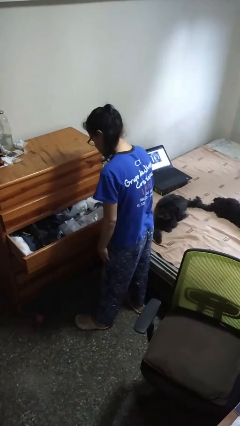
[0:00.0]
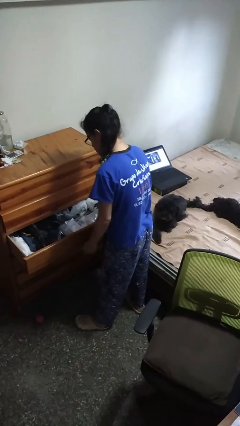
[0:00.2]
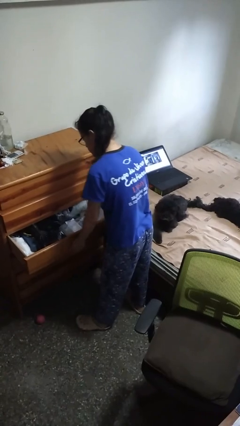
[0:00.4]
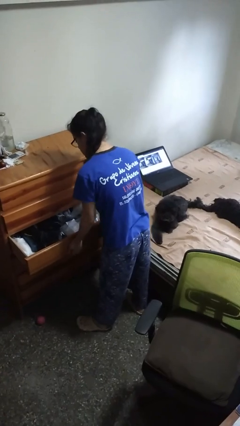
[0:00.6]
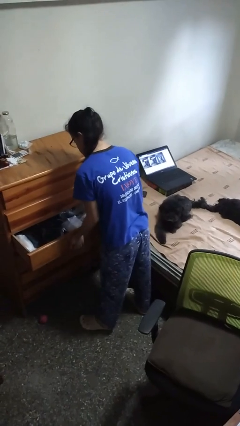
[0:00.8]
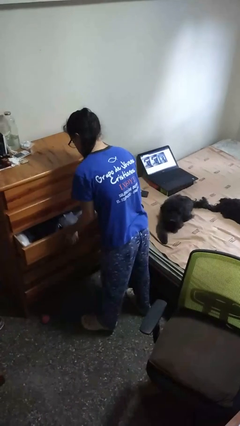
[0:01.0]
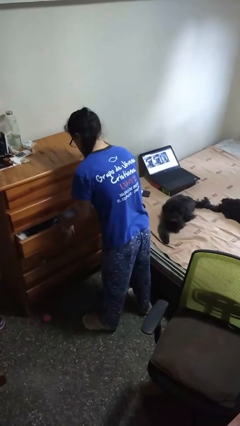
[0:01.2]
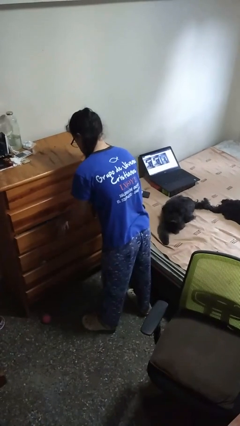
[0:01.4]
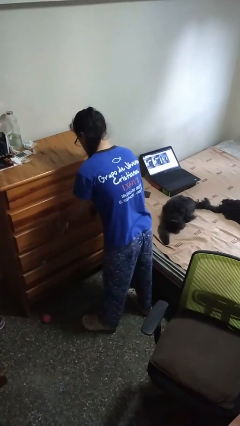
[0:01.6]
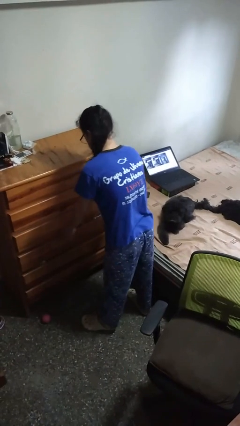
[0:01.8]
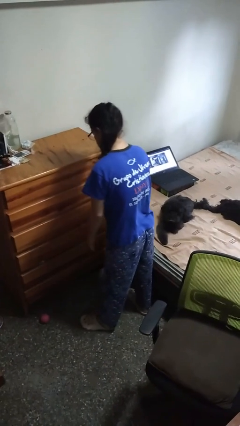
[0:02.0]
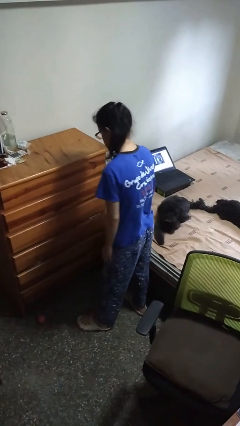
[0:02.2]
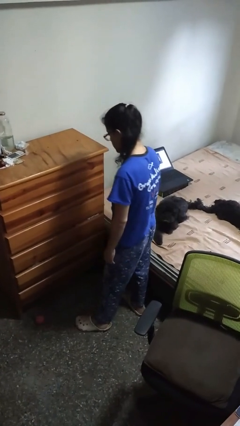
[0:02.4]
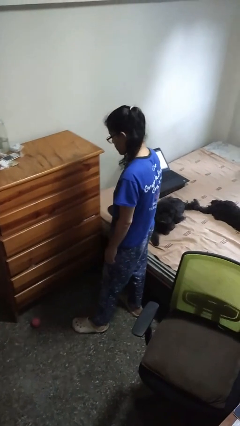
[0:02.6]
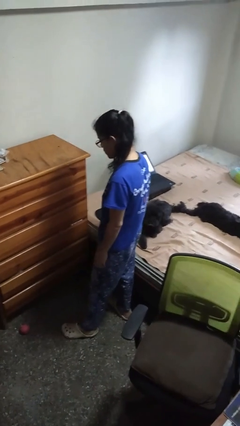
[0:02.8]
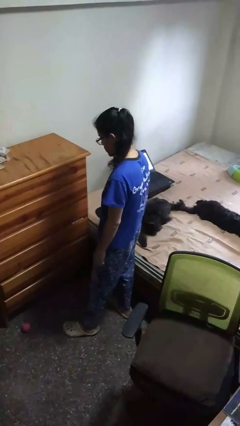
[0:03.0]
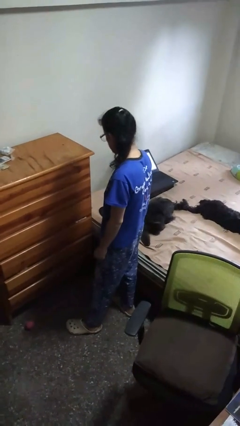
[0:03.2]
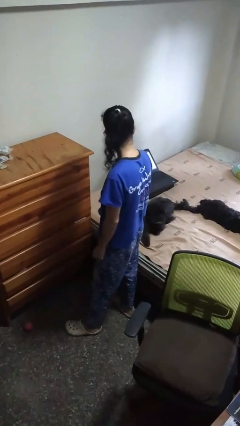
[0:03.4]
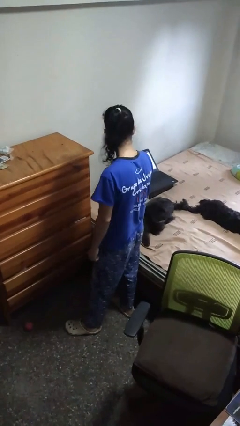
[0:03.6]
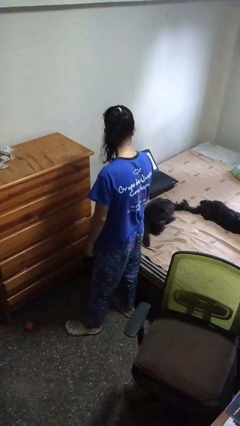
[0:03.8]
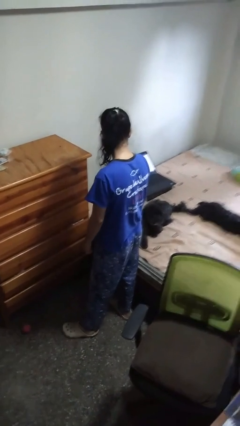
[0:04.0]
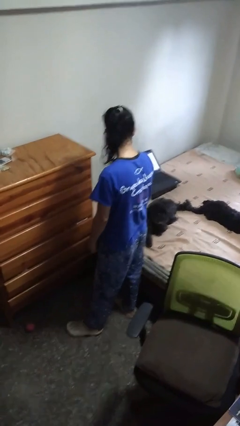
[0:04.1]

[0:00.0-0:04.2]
person closes dresser drawer

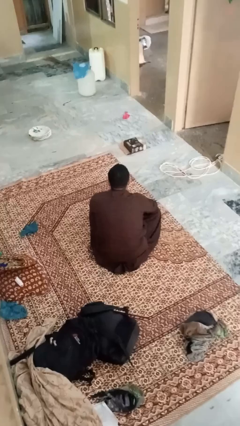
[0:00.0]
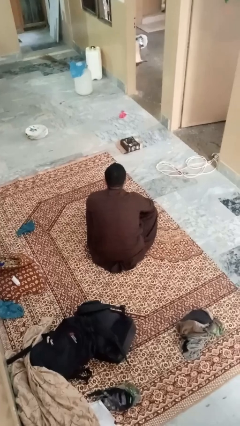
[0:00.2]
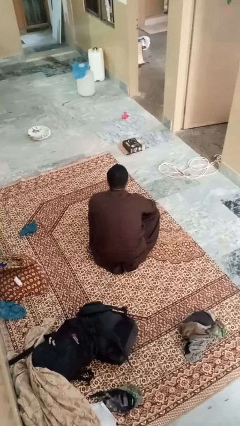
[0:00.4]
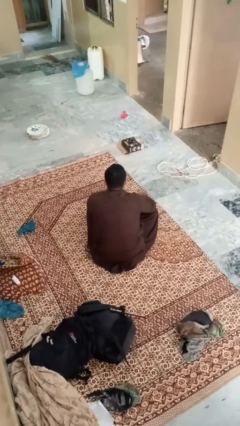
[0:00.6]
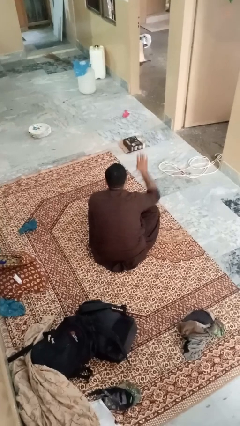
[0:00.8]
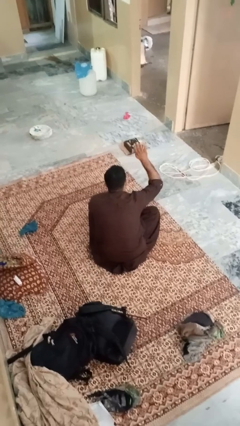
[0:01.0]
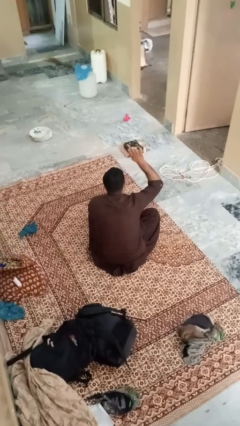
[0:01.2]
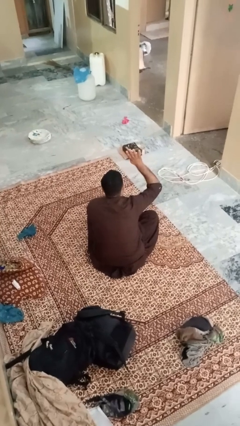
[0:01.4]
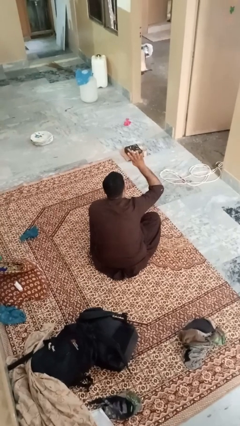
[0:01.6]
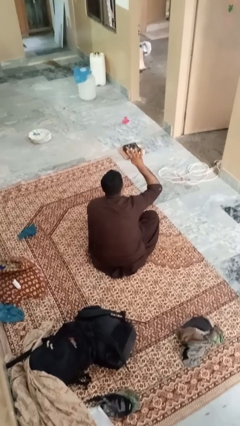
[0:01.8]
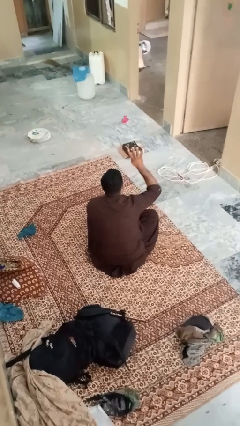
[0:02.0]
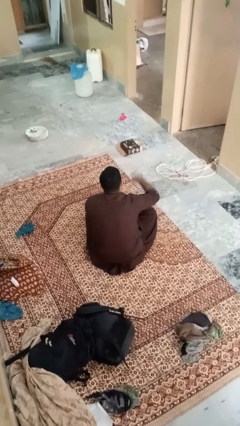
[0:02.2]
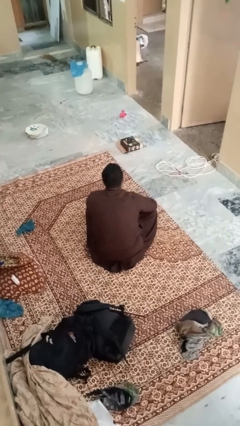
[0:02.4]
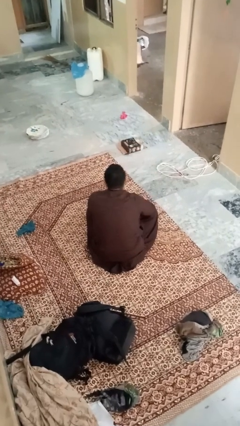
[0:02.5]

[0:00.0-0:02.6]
person gestures number four

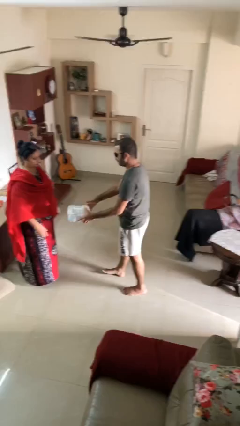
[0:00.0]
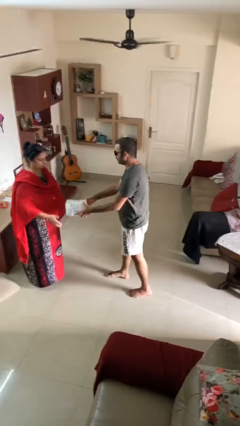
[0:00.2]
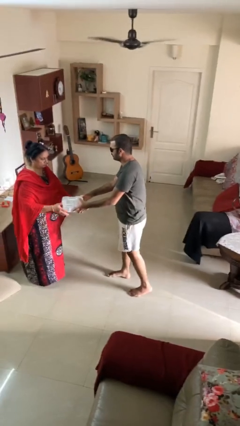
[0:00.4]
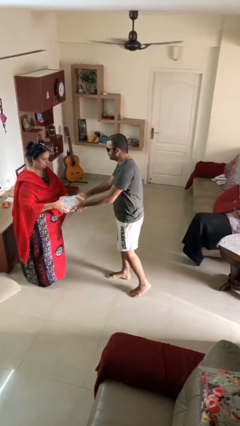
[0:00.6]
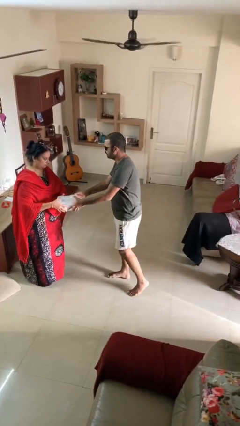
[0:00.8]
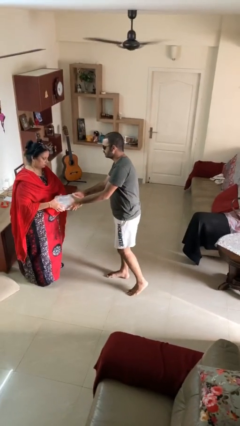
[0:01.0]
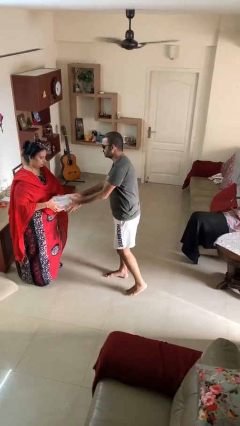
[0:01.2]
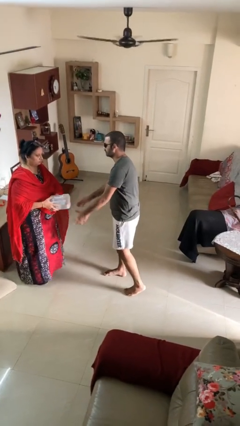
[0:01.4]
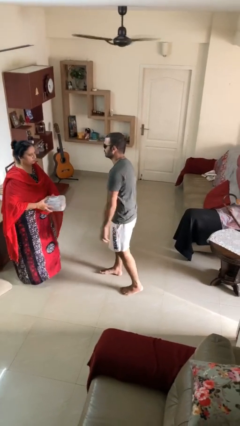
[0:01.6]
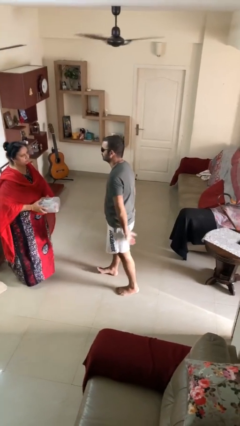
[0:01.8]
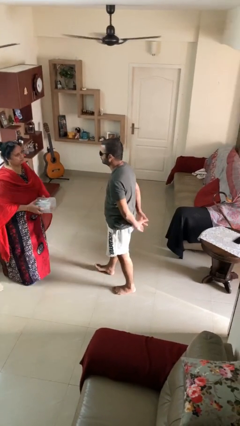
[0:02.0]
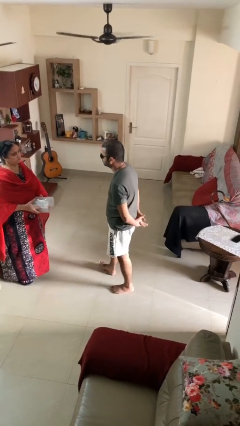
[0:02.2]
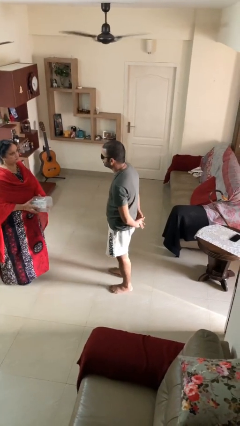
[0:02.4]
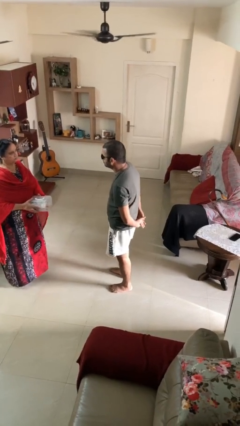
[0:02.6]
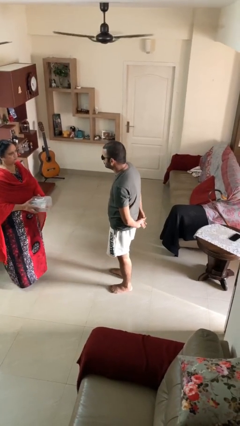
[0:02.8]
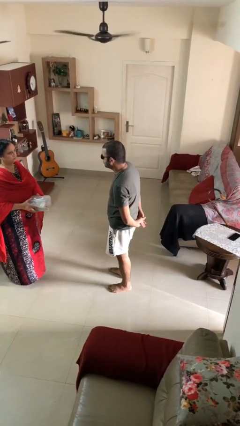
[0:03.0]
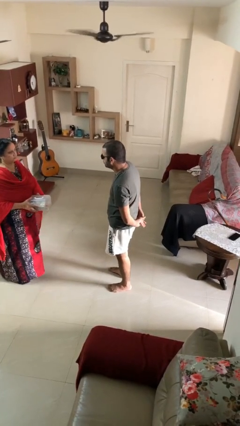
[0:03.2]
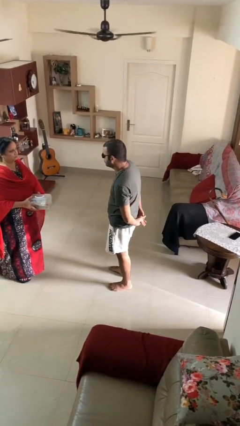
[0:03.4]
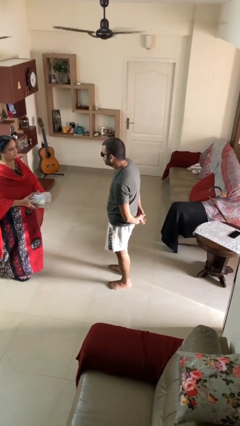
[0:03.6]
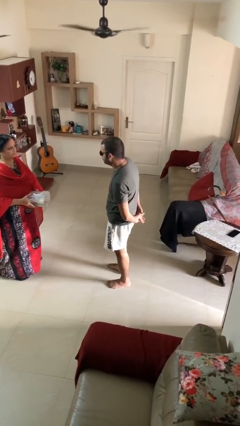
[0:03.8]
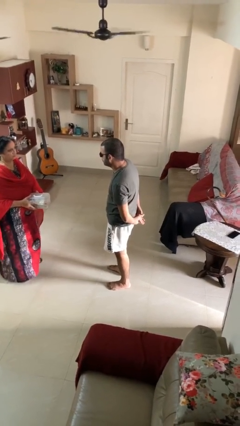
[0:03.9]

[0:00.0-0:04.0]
person transfers object to person

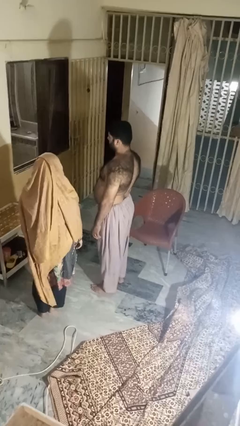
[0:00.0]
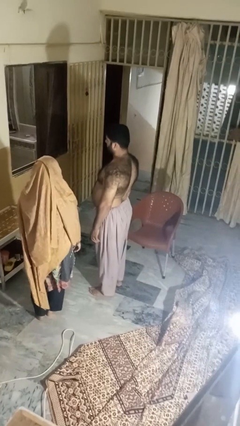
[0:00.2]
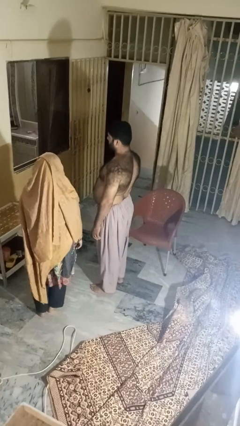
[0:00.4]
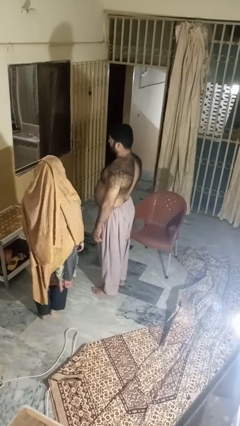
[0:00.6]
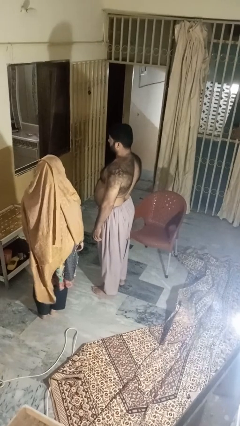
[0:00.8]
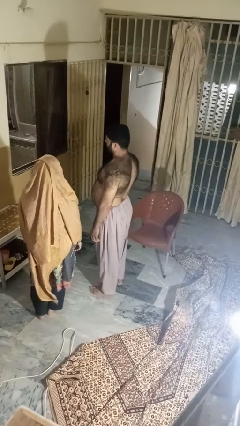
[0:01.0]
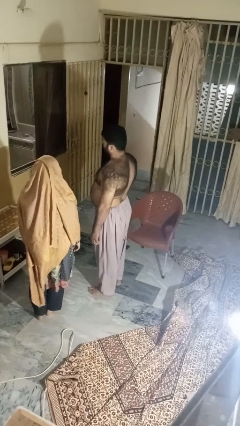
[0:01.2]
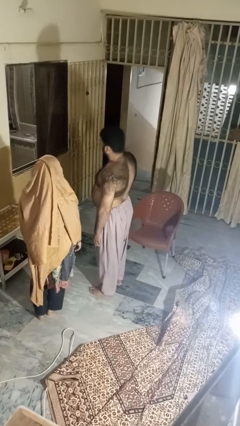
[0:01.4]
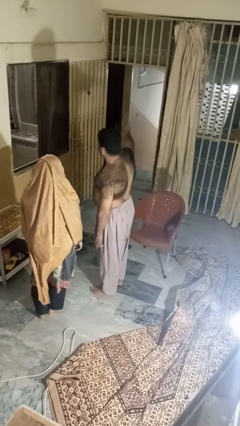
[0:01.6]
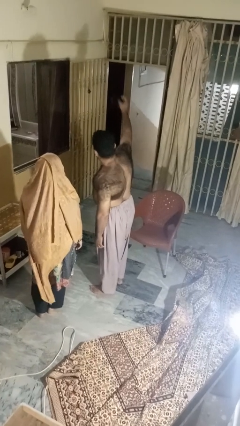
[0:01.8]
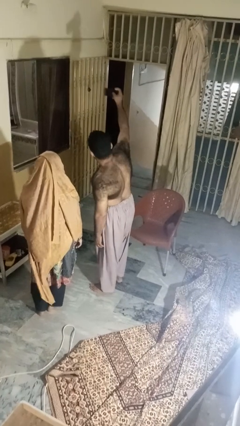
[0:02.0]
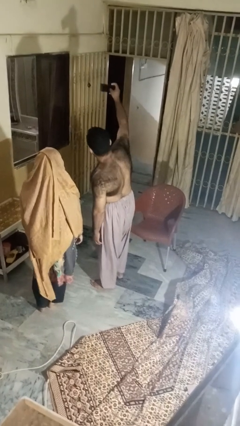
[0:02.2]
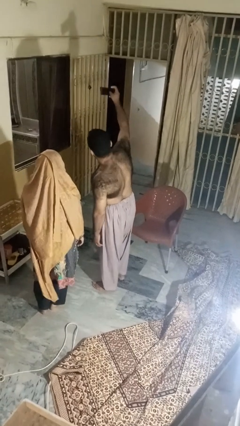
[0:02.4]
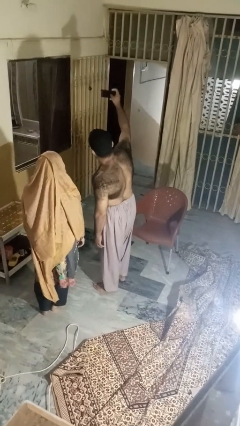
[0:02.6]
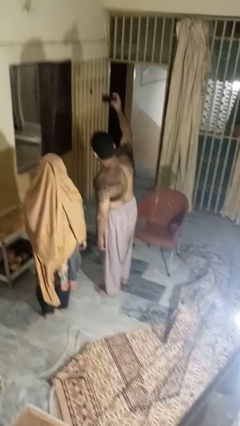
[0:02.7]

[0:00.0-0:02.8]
person takes selfie with person

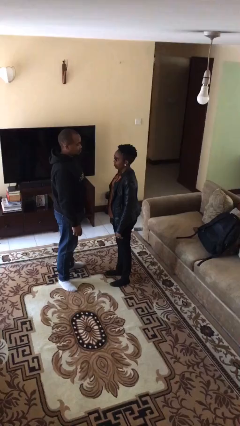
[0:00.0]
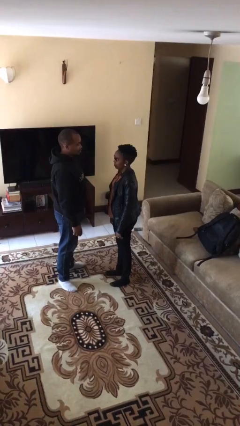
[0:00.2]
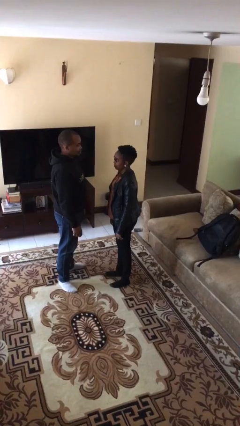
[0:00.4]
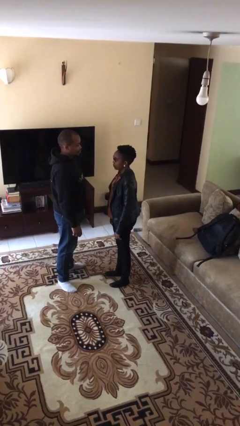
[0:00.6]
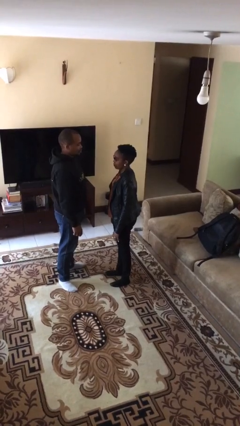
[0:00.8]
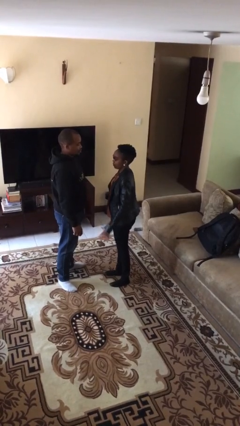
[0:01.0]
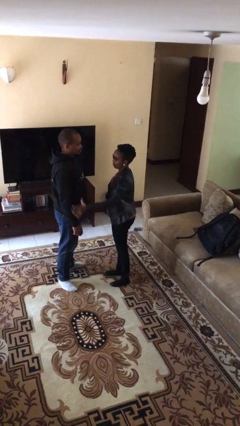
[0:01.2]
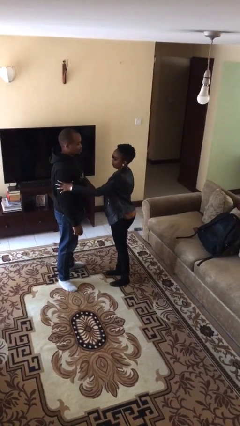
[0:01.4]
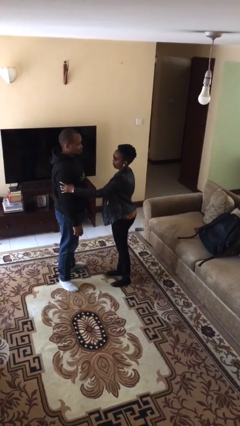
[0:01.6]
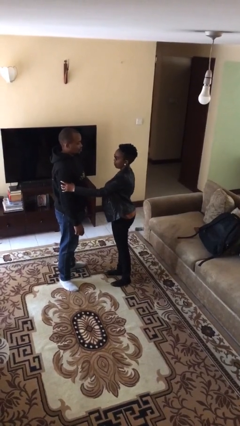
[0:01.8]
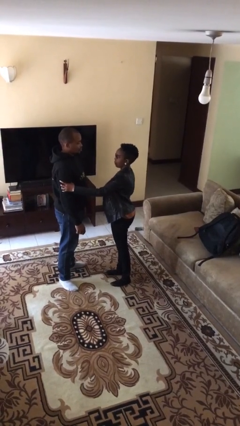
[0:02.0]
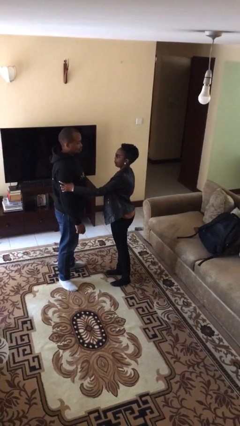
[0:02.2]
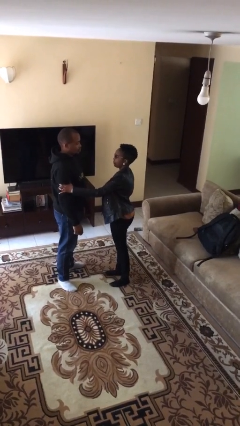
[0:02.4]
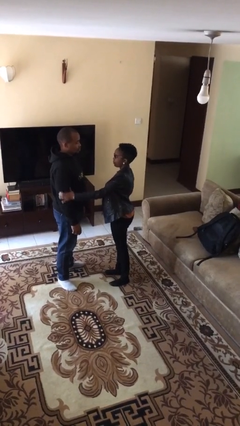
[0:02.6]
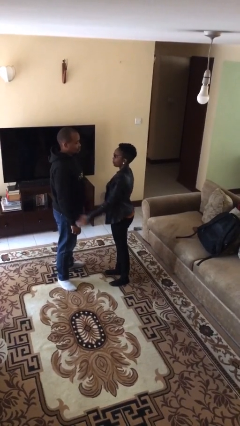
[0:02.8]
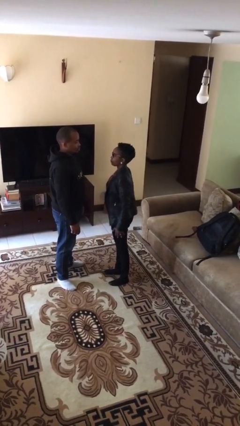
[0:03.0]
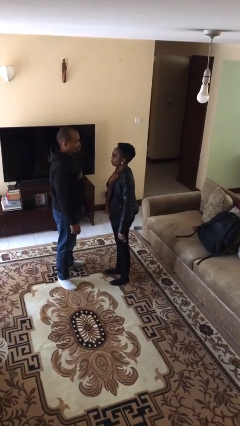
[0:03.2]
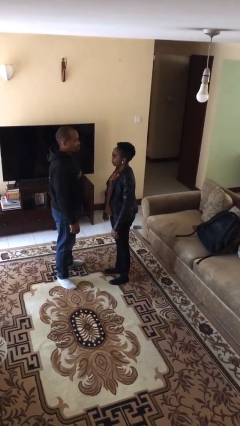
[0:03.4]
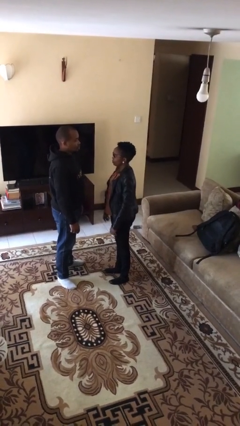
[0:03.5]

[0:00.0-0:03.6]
person grabs person by bicep

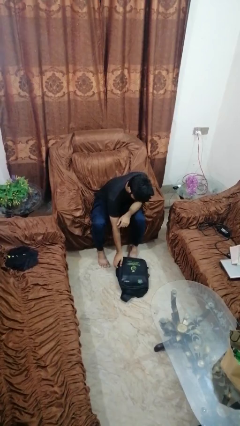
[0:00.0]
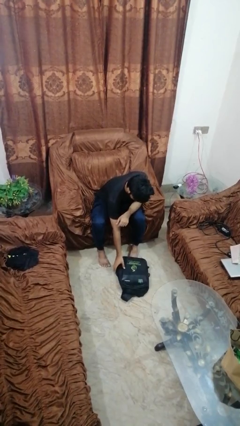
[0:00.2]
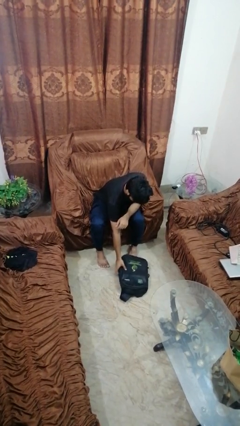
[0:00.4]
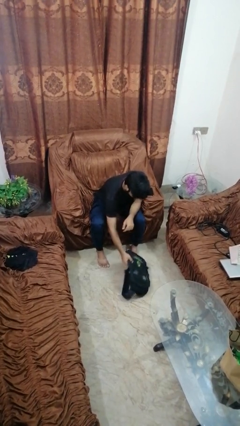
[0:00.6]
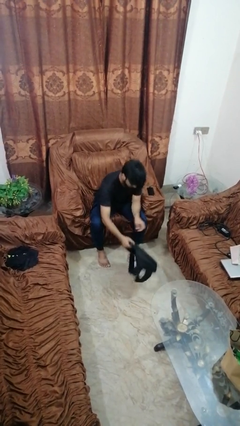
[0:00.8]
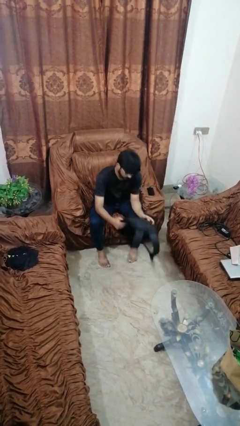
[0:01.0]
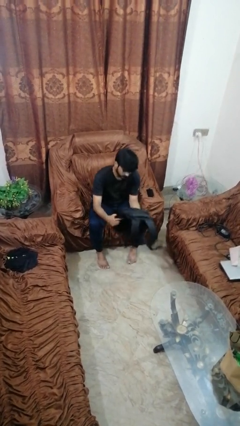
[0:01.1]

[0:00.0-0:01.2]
person picks up object from floor
